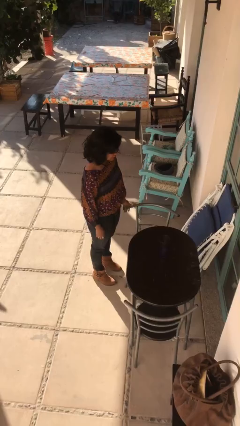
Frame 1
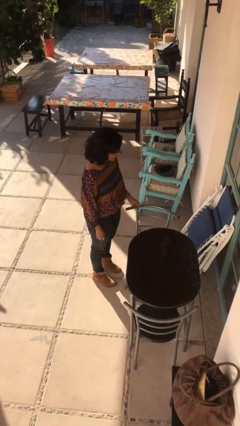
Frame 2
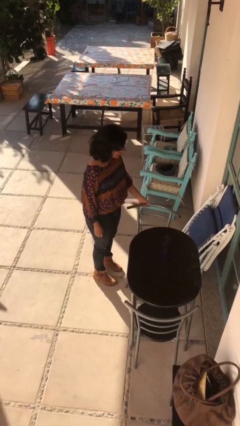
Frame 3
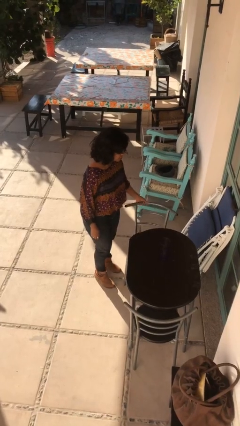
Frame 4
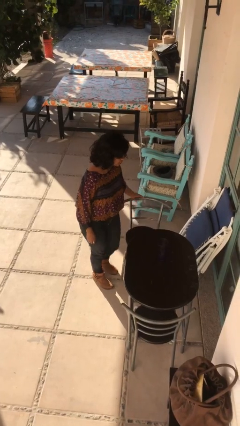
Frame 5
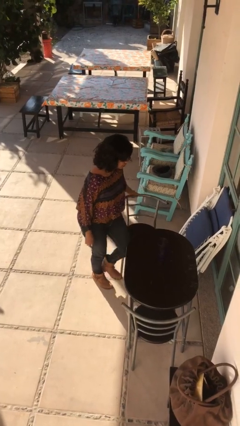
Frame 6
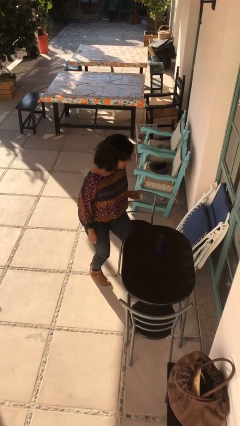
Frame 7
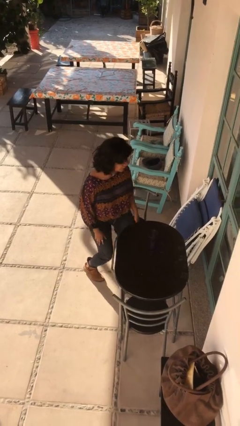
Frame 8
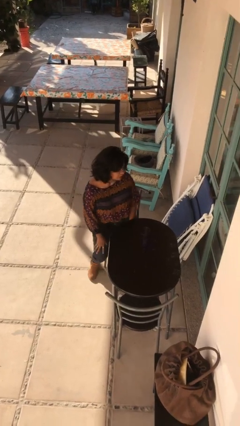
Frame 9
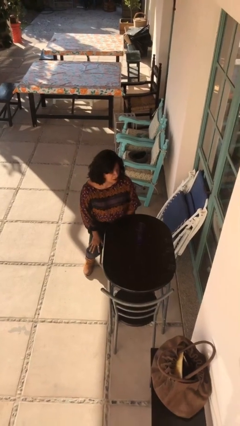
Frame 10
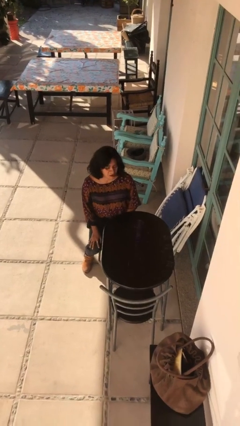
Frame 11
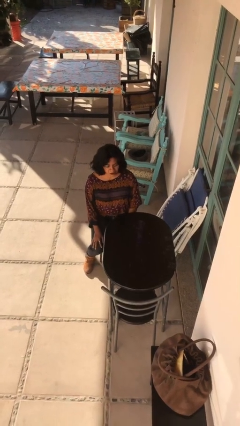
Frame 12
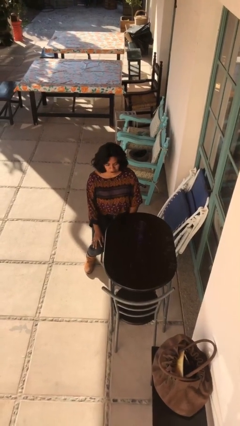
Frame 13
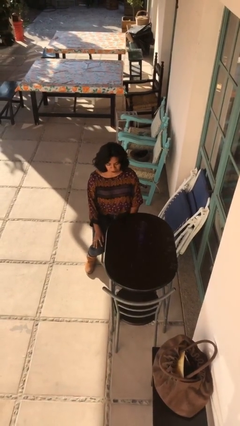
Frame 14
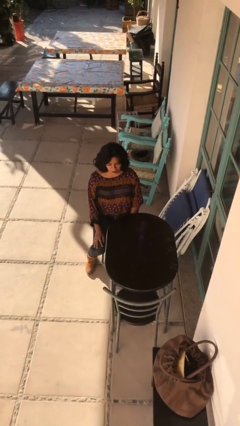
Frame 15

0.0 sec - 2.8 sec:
person sits down

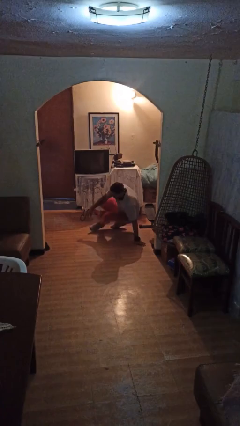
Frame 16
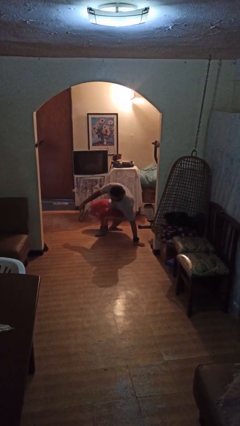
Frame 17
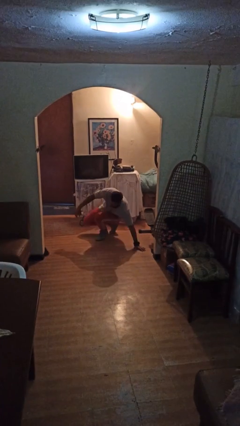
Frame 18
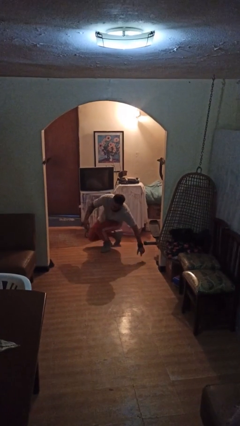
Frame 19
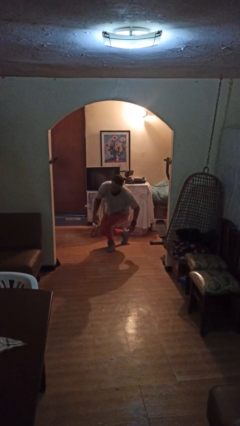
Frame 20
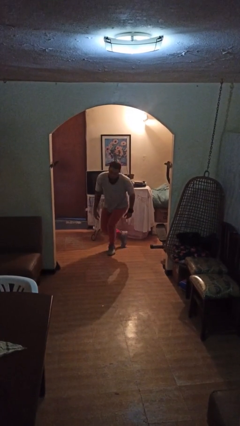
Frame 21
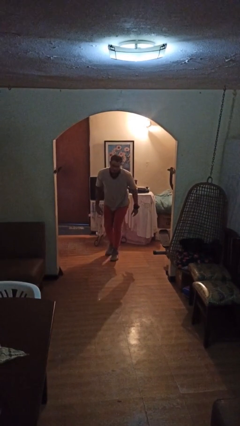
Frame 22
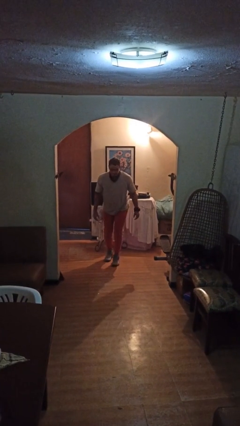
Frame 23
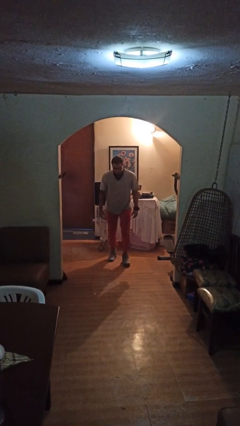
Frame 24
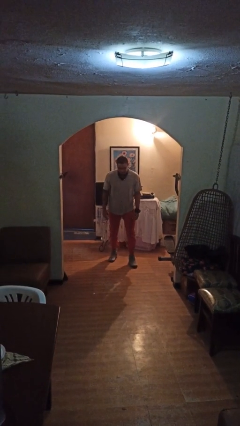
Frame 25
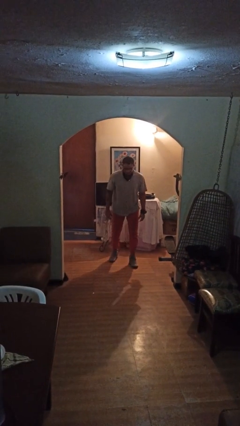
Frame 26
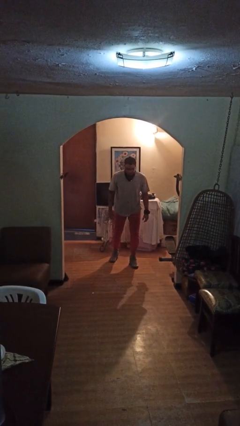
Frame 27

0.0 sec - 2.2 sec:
person stands up

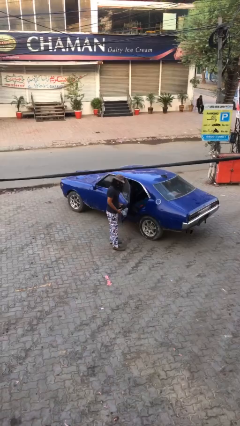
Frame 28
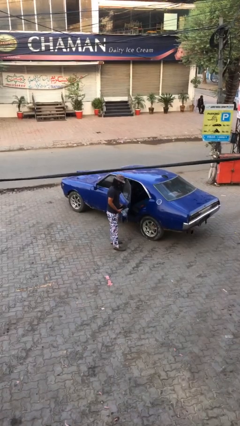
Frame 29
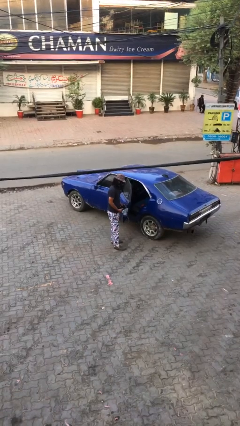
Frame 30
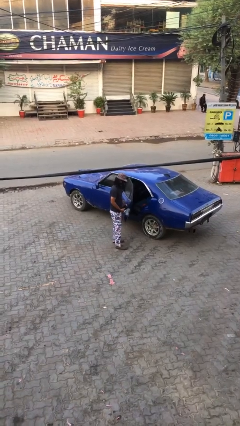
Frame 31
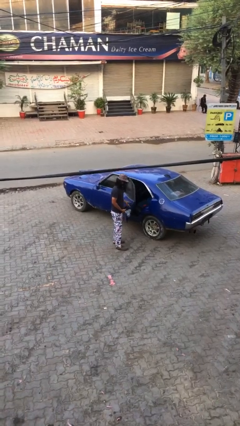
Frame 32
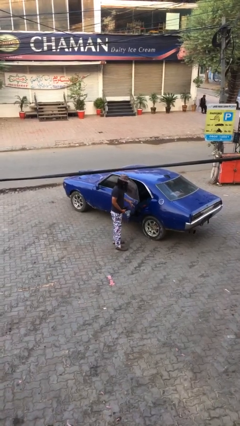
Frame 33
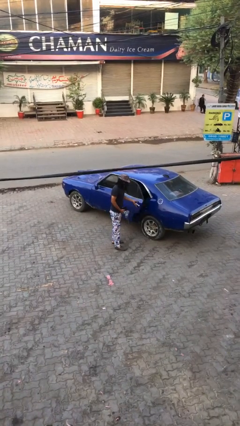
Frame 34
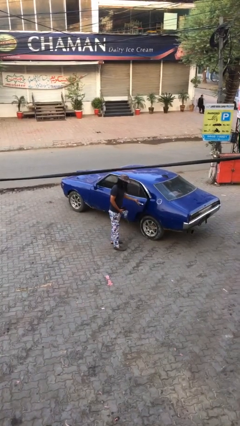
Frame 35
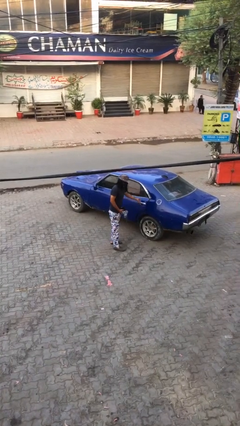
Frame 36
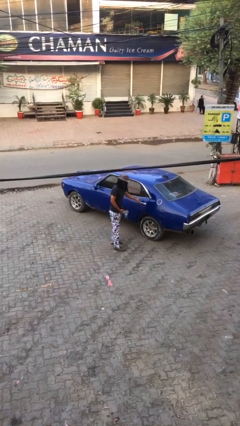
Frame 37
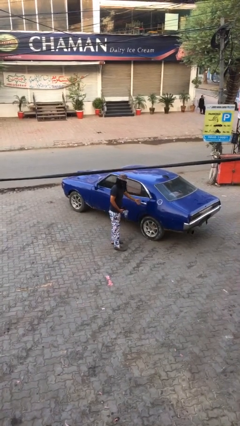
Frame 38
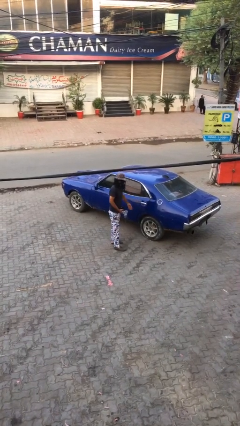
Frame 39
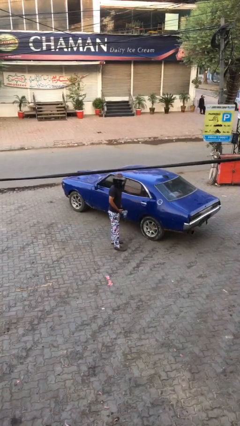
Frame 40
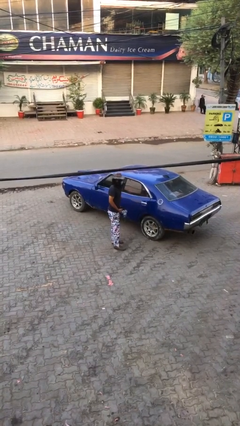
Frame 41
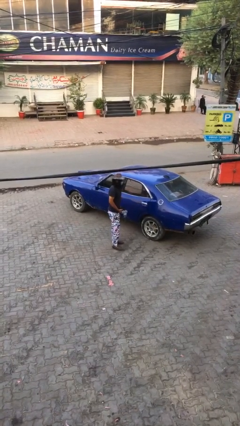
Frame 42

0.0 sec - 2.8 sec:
person closes car door

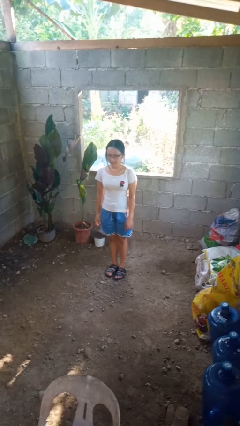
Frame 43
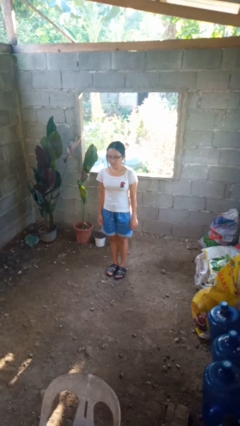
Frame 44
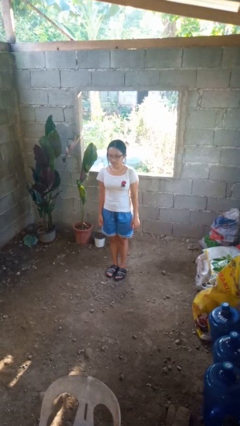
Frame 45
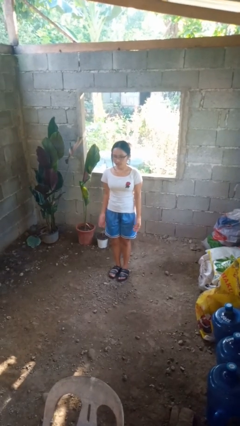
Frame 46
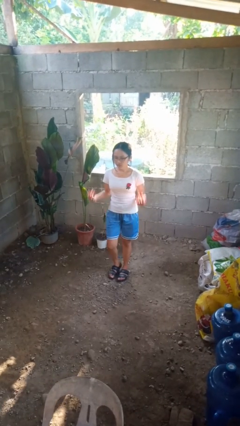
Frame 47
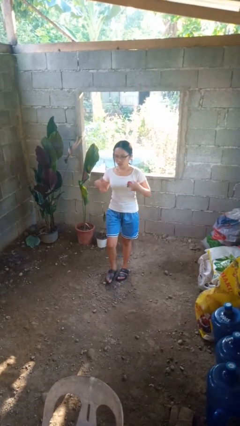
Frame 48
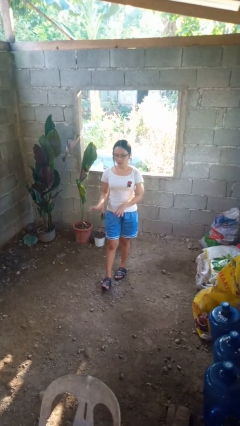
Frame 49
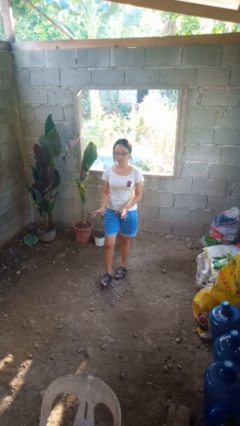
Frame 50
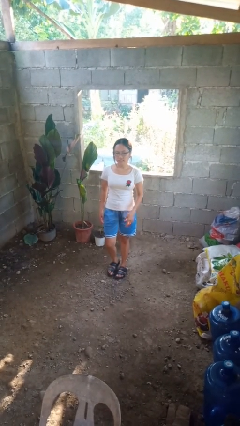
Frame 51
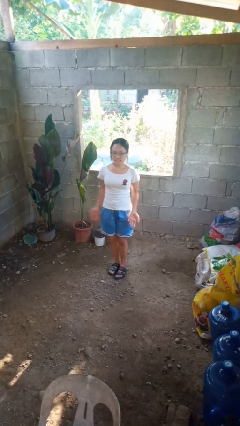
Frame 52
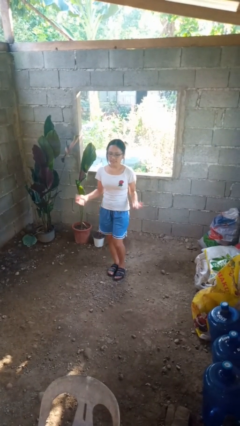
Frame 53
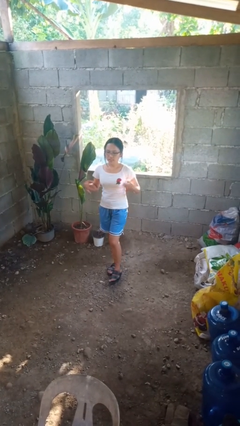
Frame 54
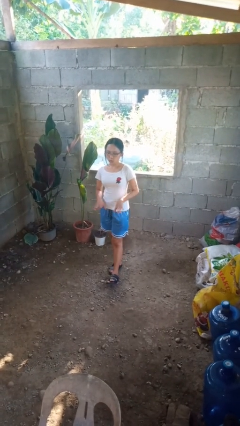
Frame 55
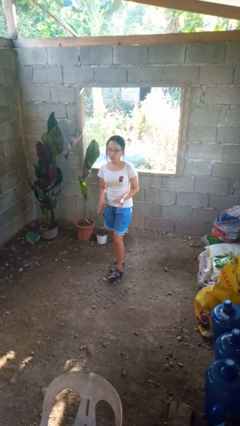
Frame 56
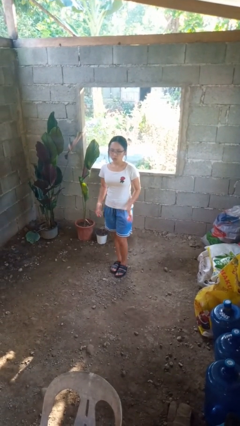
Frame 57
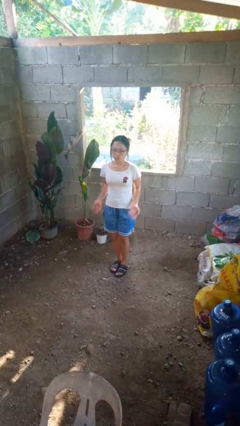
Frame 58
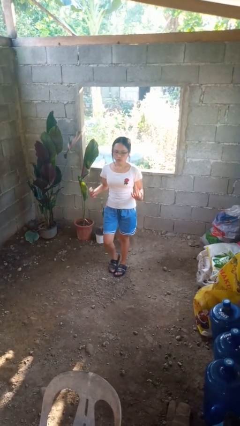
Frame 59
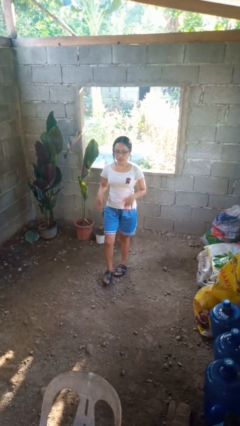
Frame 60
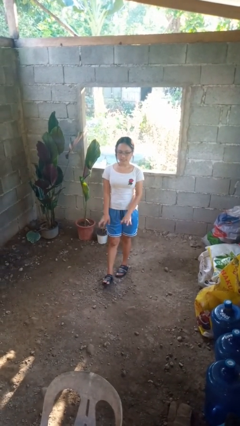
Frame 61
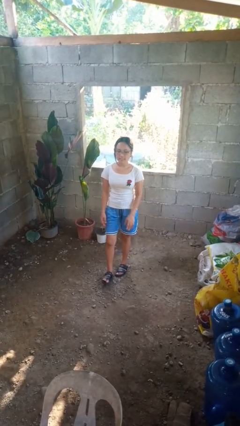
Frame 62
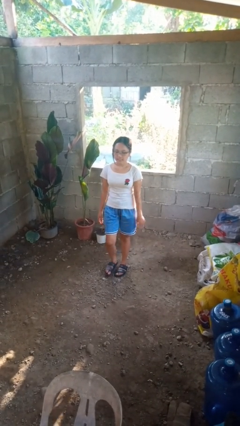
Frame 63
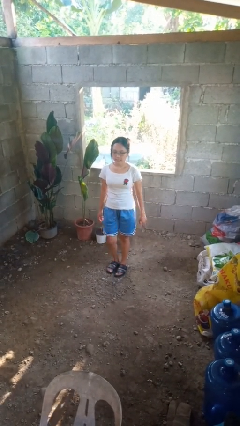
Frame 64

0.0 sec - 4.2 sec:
person dances in place

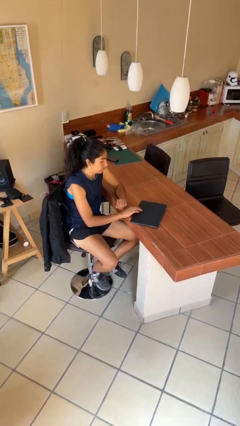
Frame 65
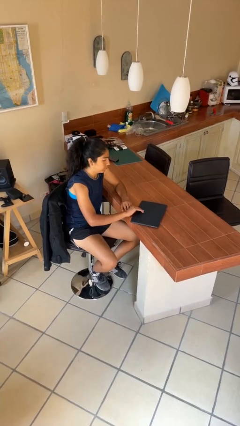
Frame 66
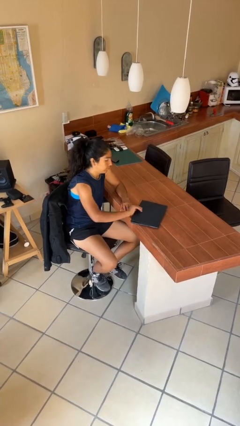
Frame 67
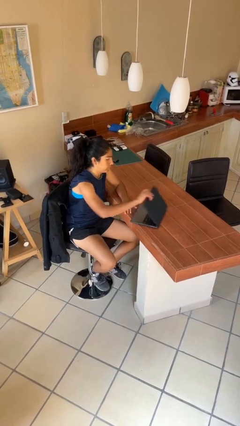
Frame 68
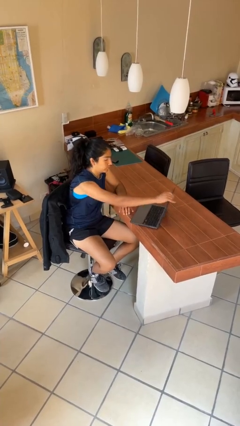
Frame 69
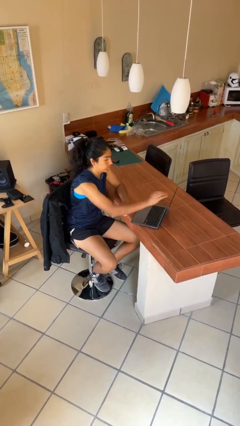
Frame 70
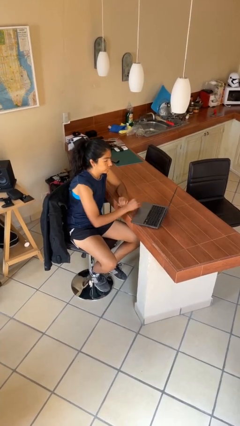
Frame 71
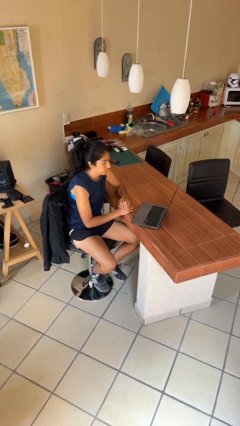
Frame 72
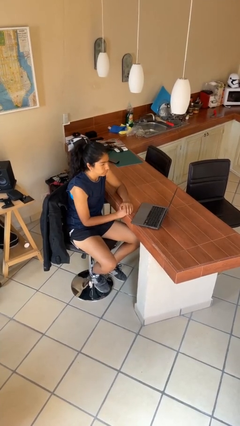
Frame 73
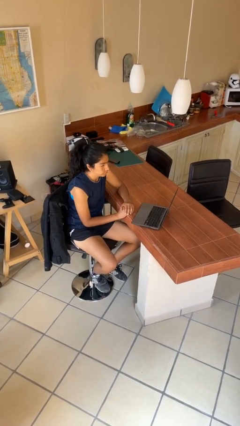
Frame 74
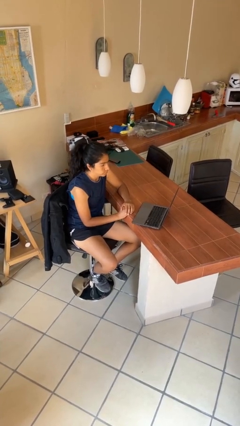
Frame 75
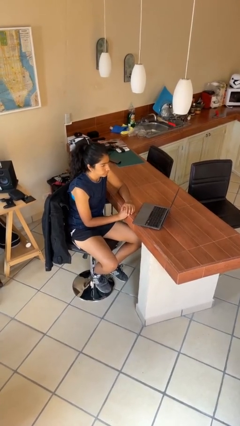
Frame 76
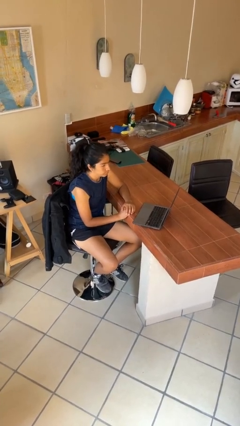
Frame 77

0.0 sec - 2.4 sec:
person opens laptop

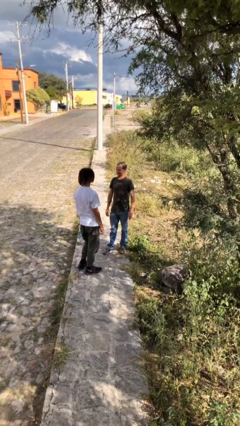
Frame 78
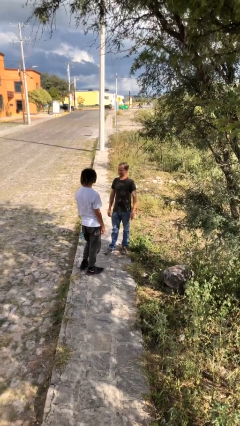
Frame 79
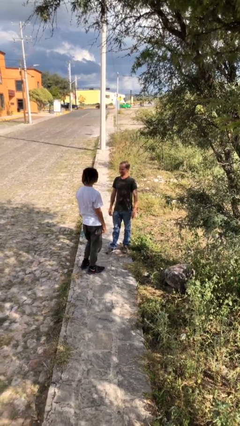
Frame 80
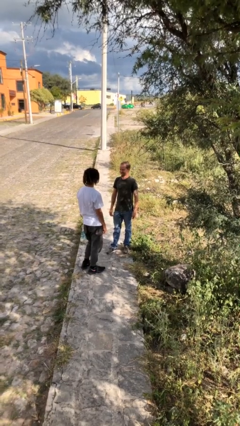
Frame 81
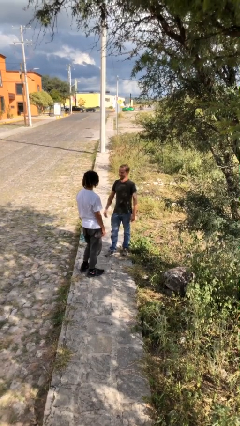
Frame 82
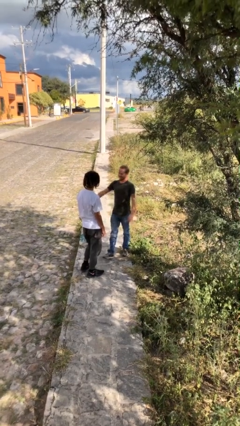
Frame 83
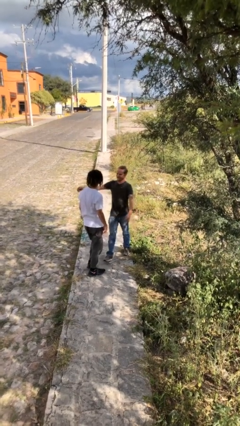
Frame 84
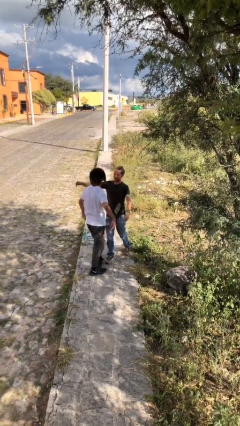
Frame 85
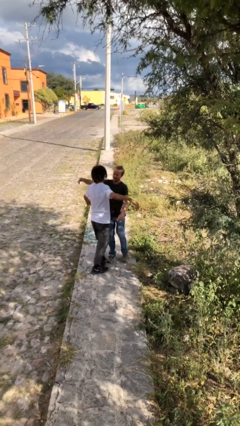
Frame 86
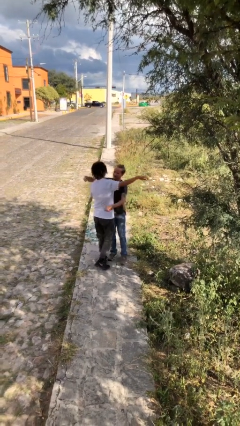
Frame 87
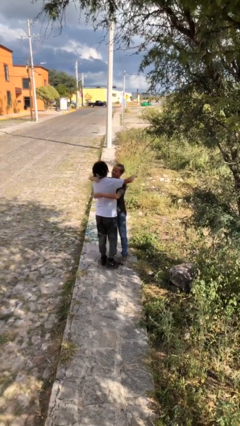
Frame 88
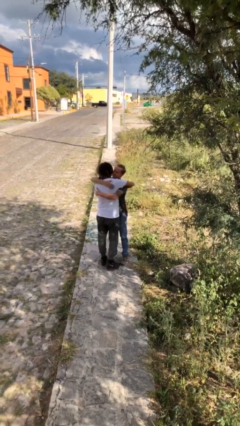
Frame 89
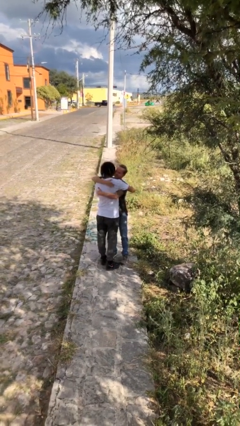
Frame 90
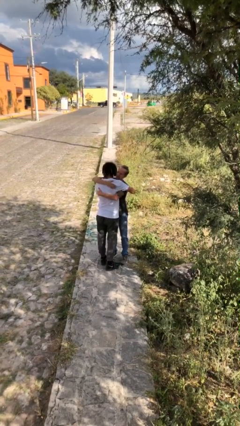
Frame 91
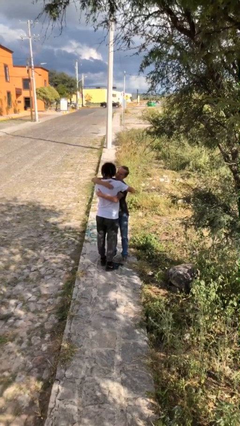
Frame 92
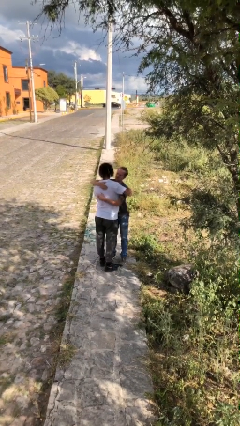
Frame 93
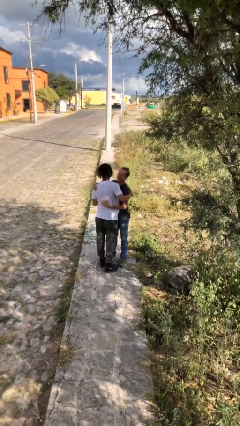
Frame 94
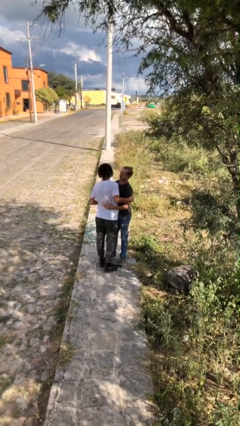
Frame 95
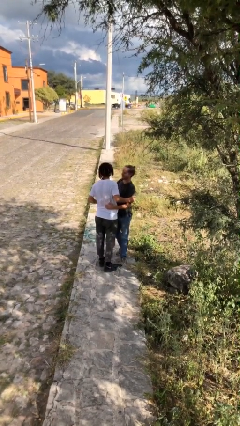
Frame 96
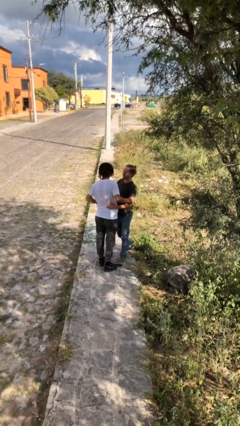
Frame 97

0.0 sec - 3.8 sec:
person embraces person
